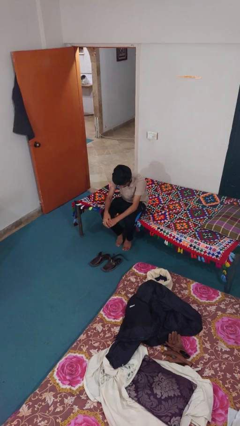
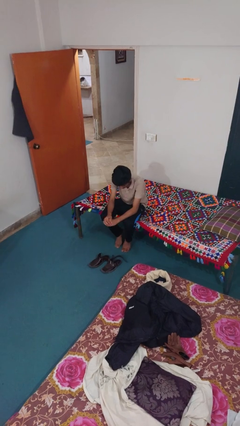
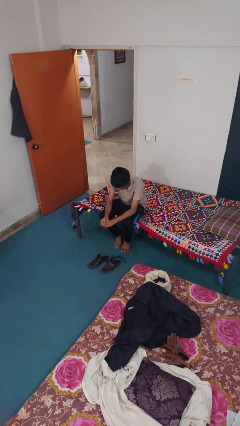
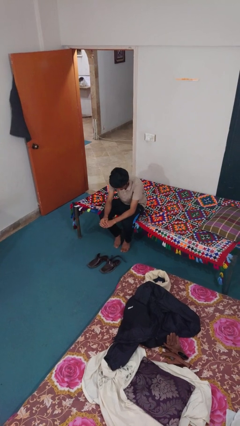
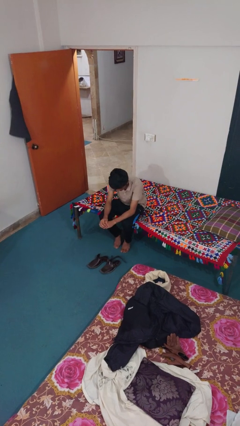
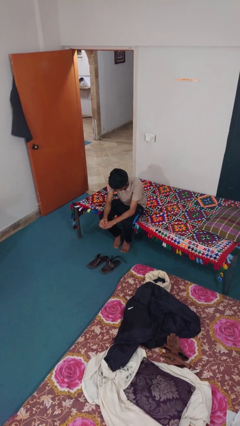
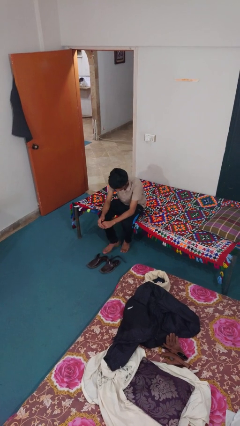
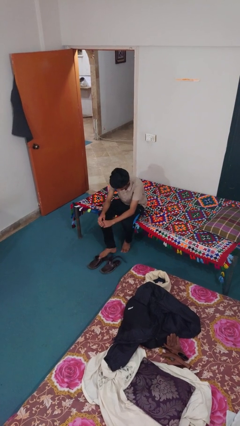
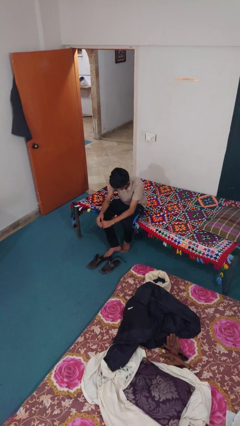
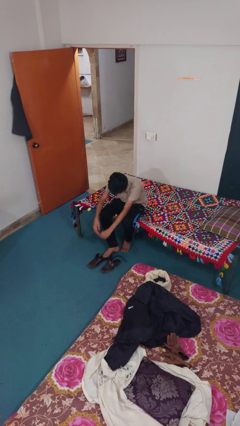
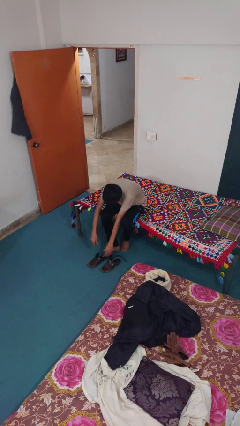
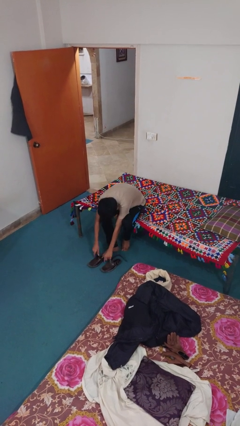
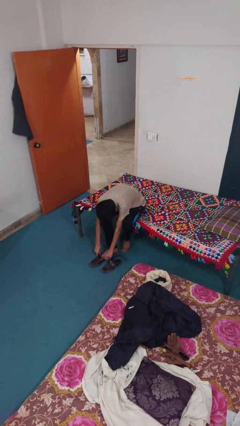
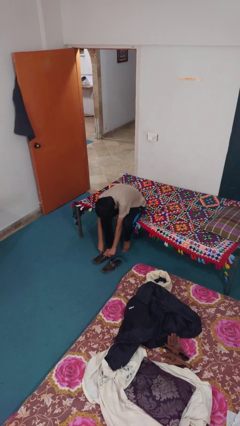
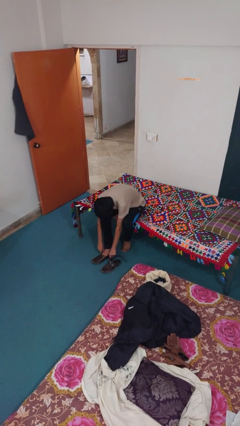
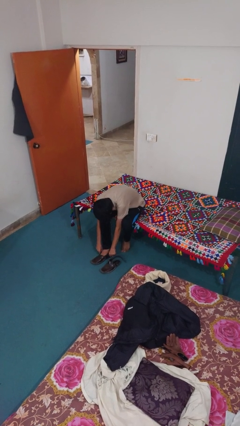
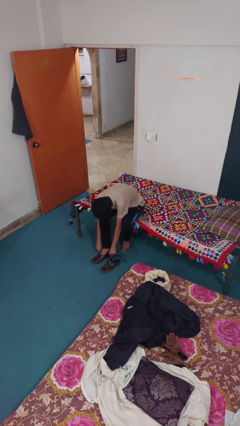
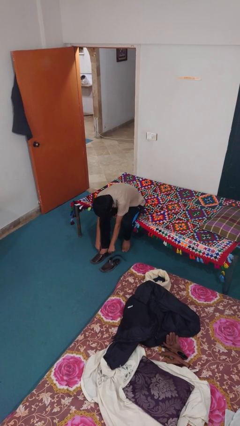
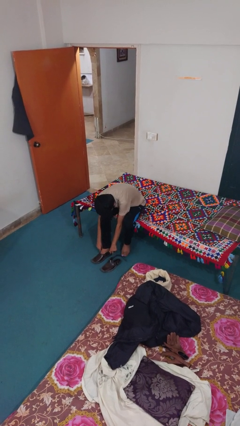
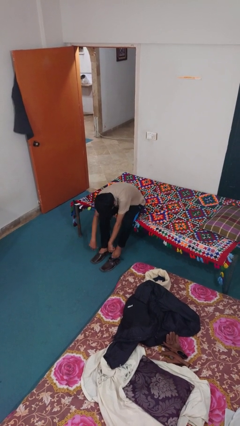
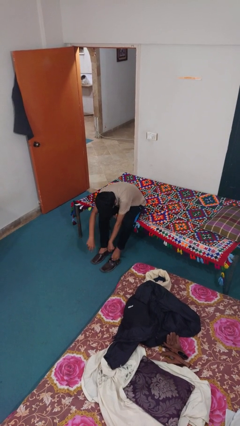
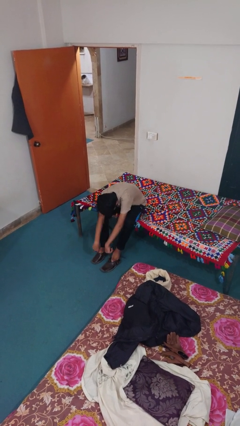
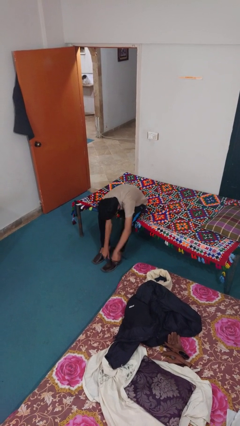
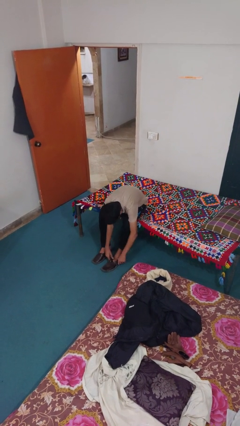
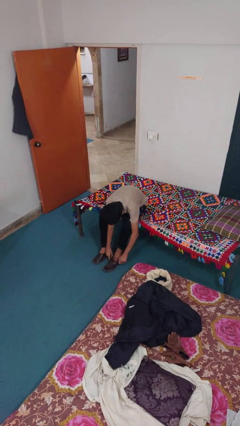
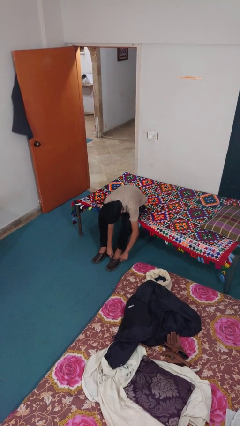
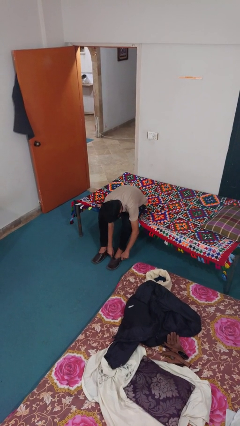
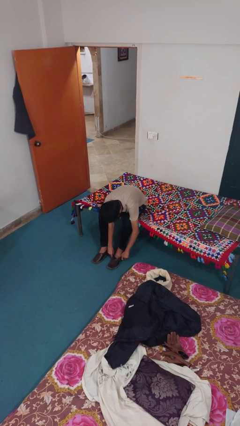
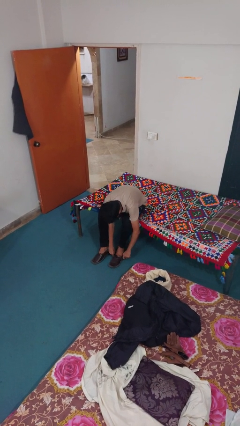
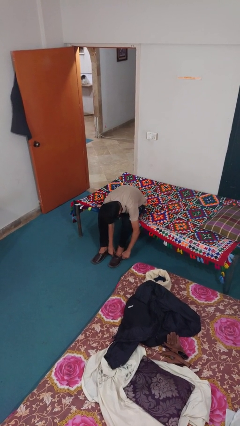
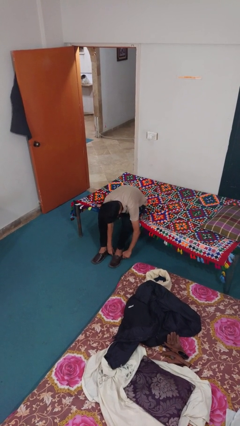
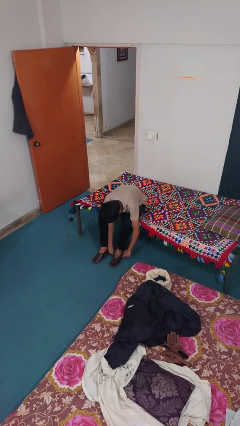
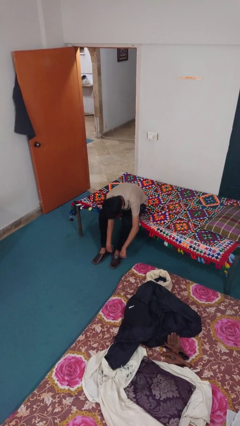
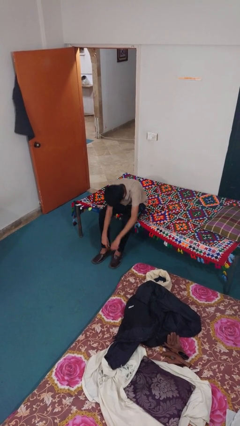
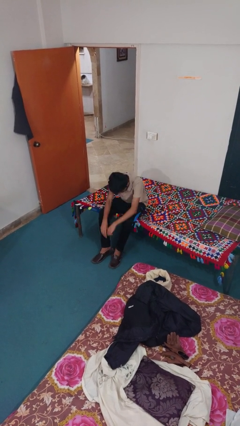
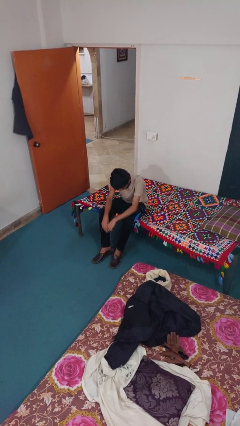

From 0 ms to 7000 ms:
person puts on shoes

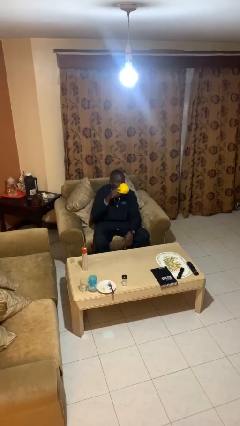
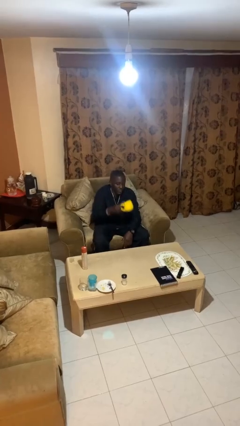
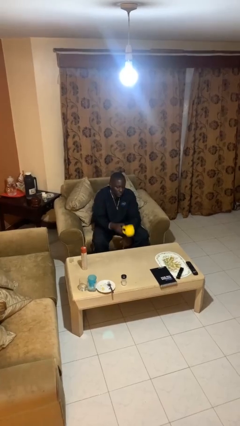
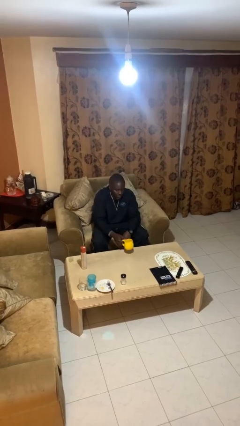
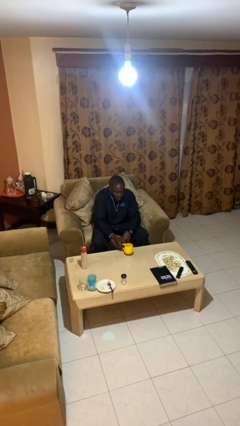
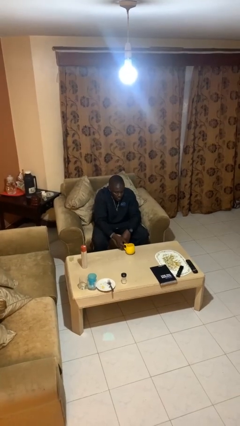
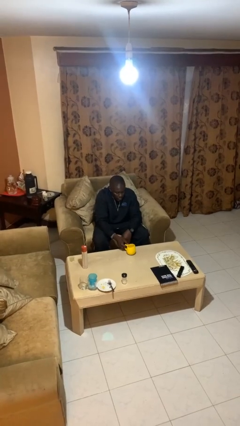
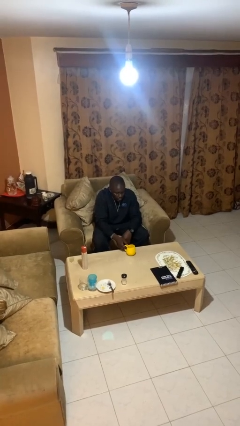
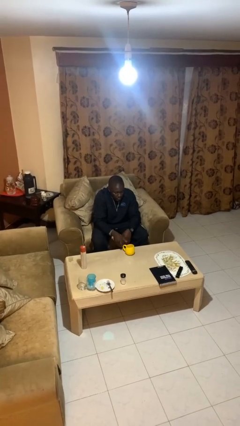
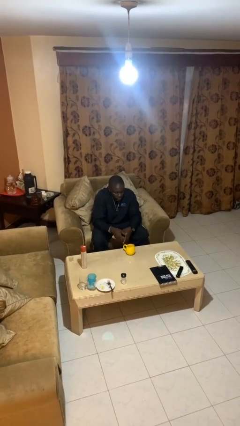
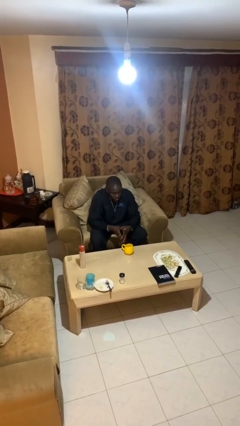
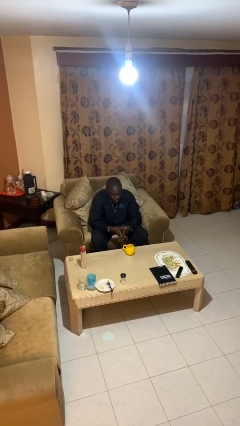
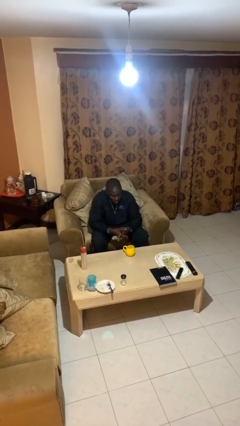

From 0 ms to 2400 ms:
person puts down object on table

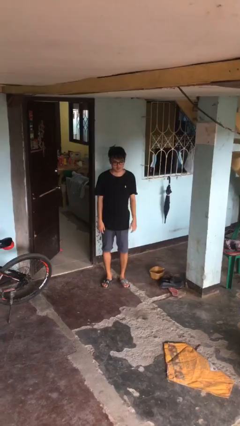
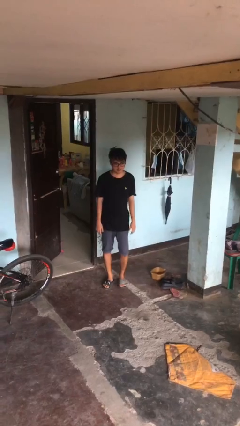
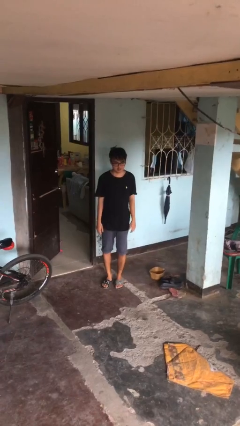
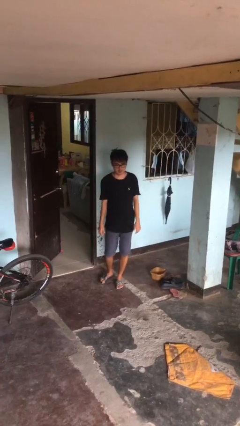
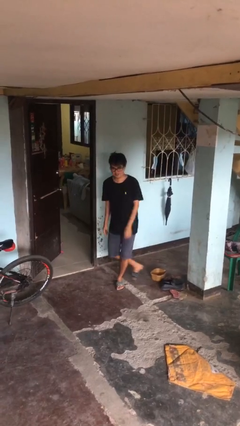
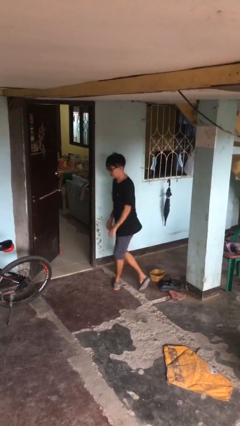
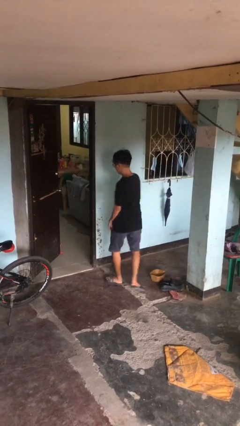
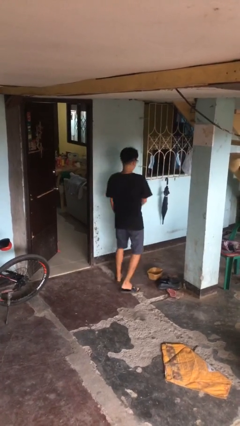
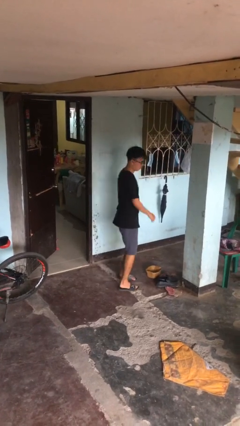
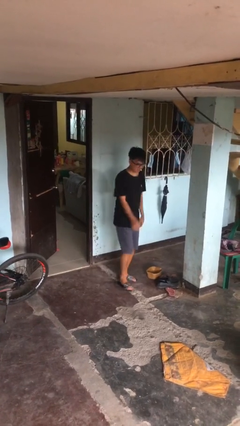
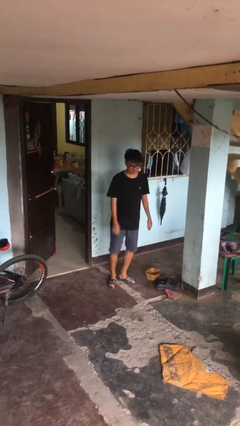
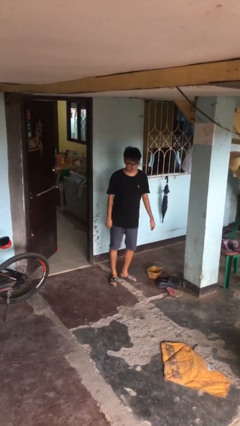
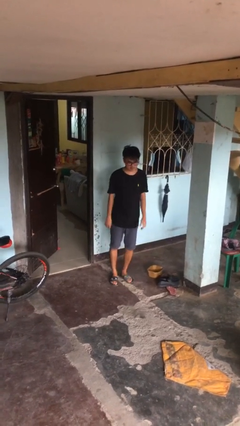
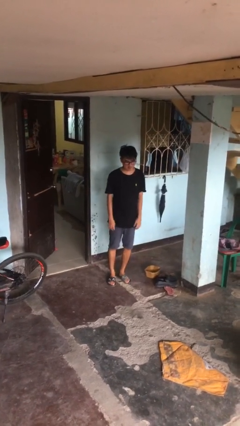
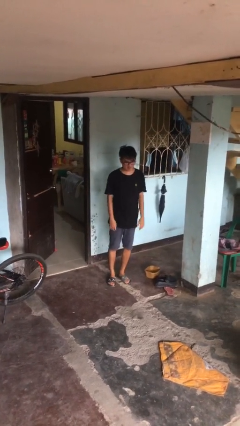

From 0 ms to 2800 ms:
person twirls

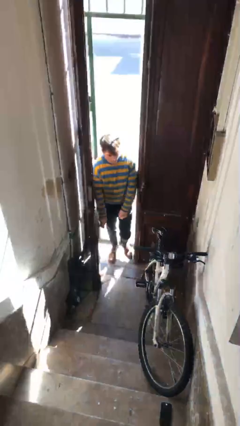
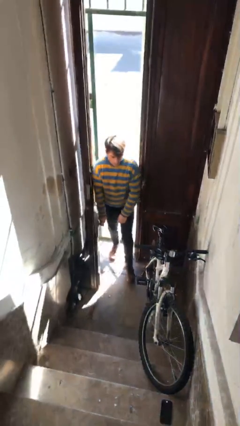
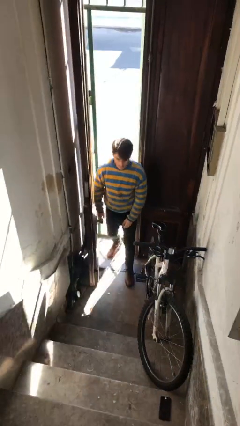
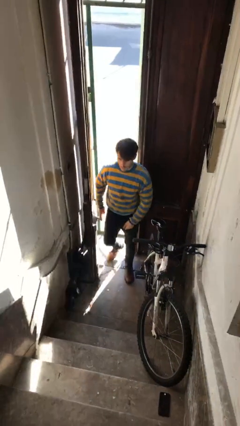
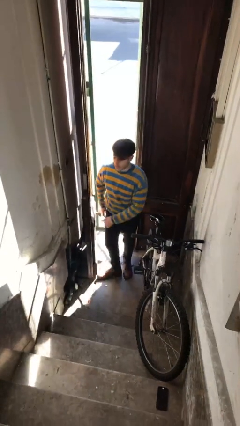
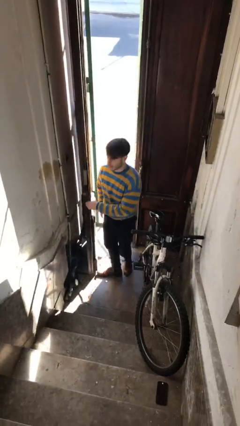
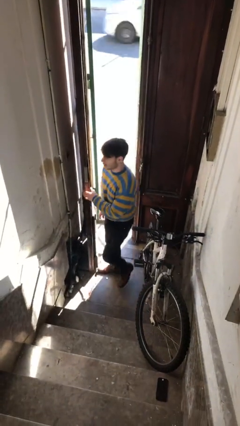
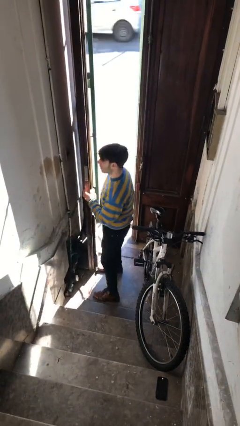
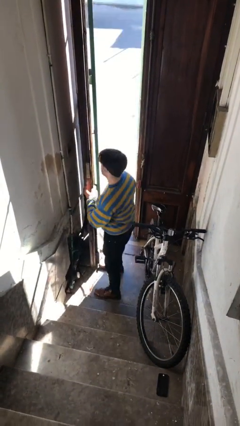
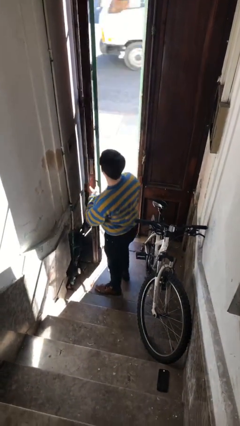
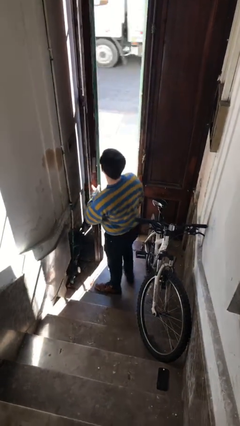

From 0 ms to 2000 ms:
person enters scene through structure

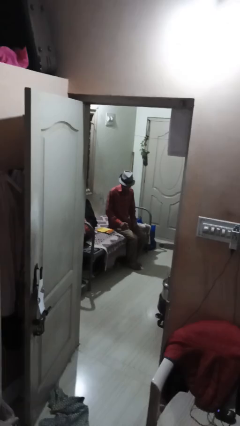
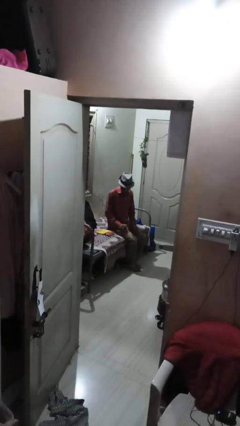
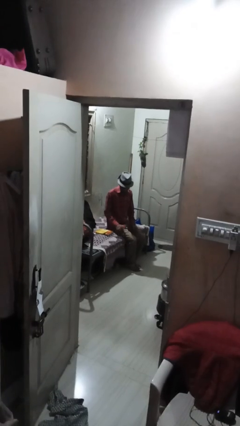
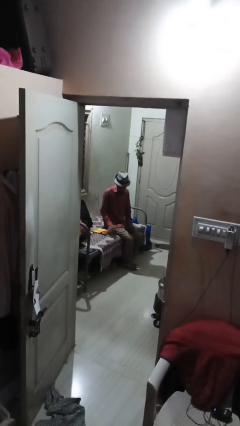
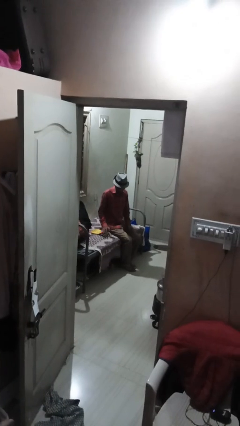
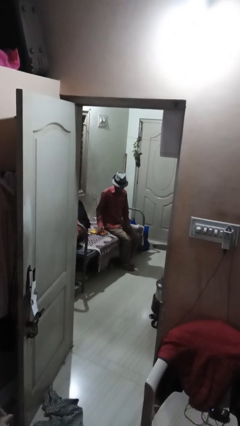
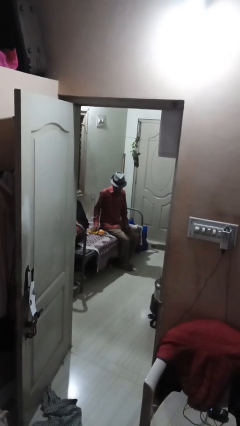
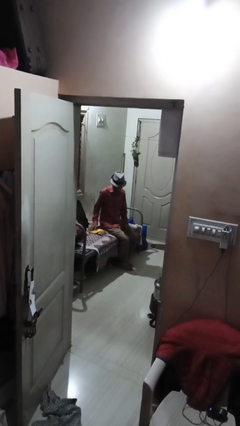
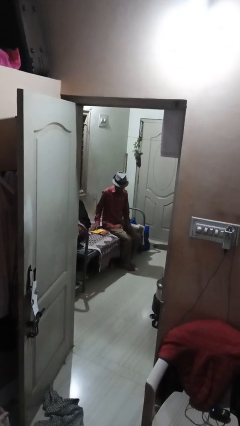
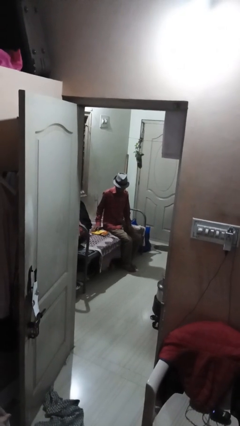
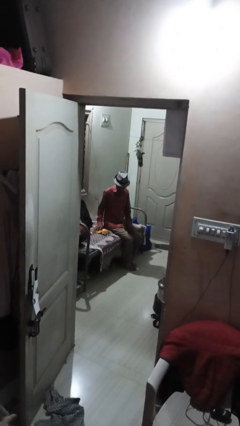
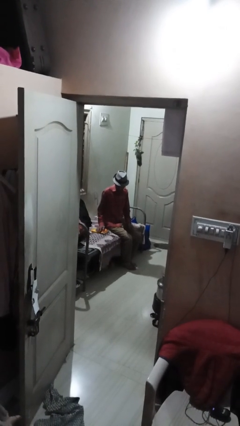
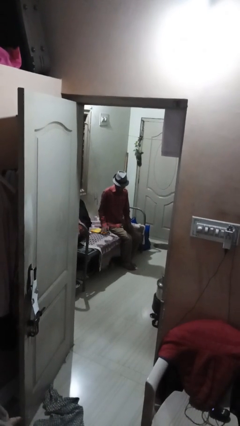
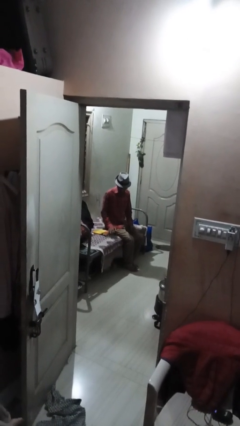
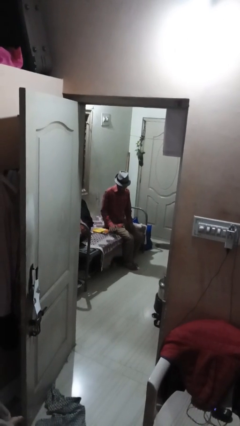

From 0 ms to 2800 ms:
person waves hand over object

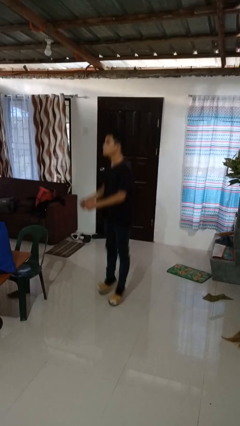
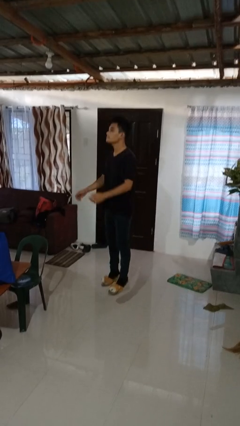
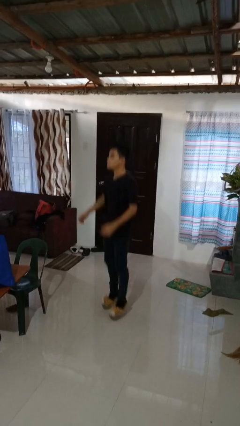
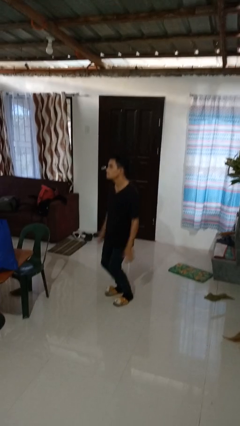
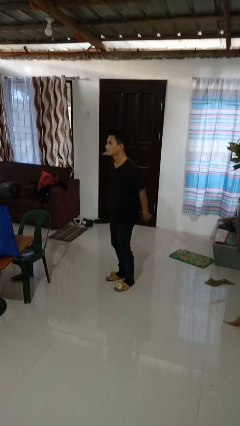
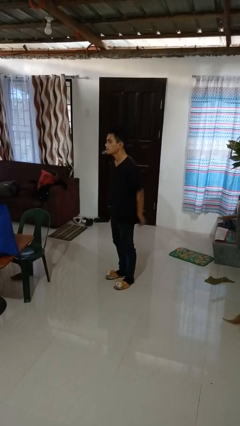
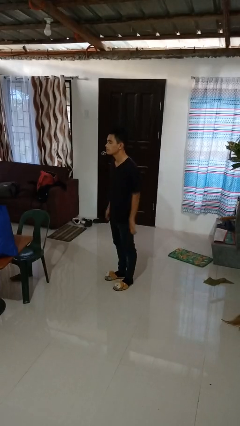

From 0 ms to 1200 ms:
person jumps
